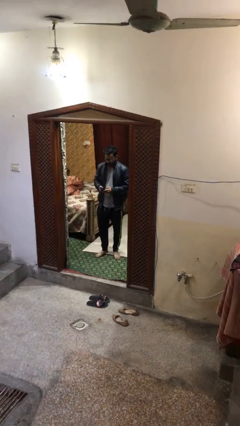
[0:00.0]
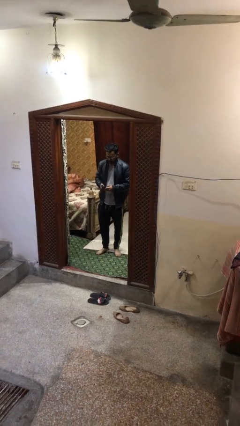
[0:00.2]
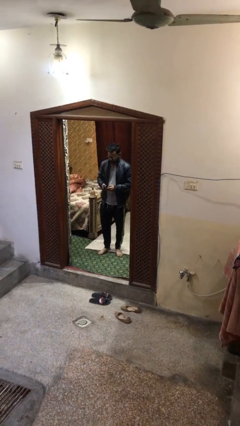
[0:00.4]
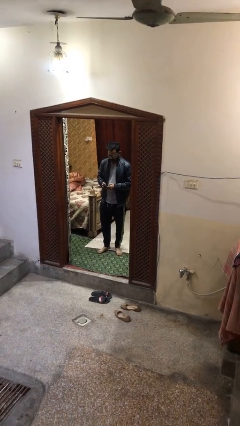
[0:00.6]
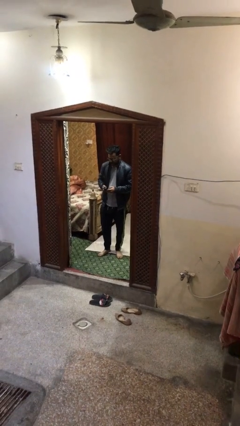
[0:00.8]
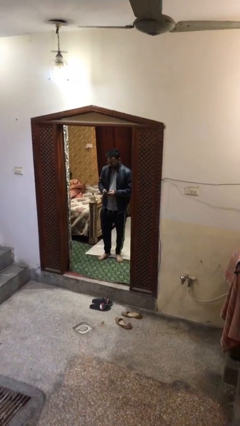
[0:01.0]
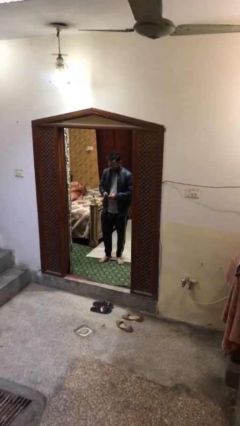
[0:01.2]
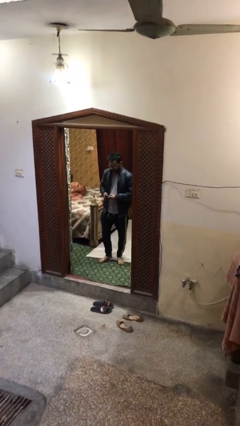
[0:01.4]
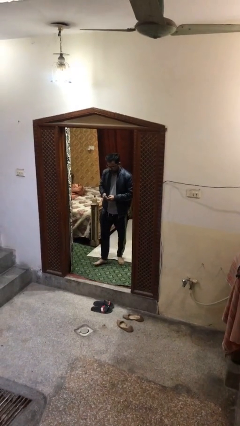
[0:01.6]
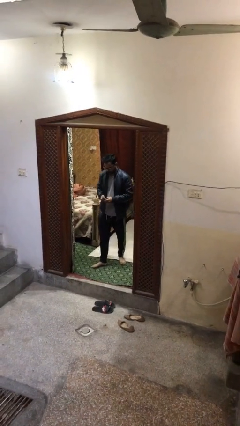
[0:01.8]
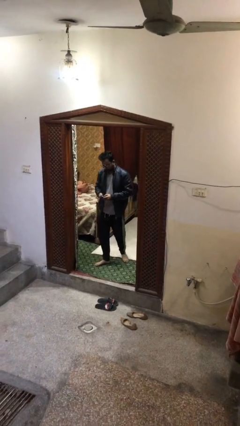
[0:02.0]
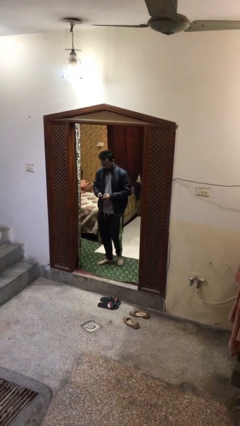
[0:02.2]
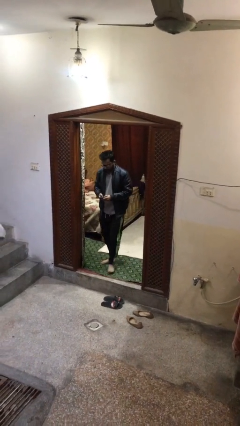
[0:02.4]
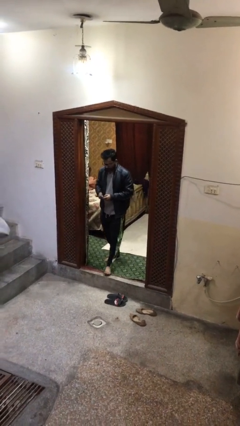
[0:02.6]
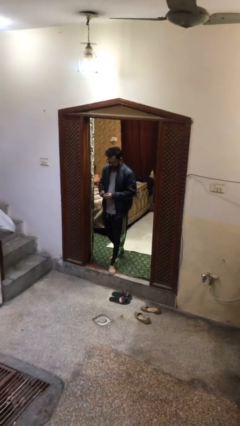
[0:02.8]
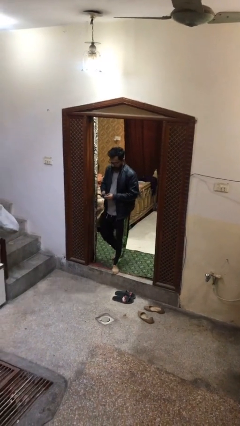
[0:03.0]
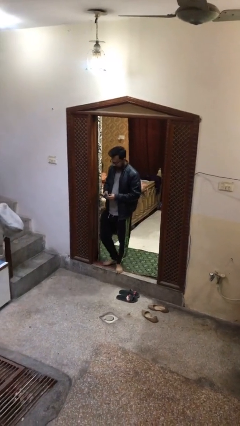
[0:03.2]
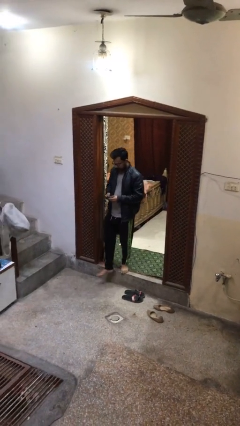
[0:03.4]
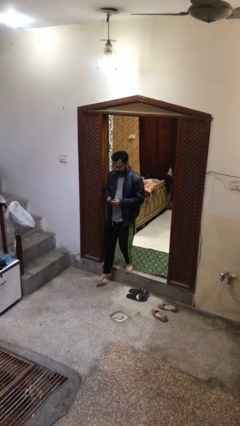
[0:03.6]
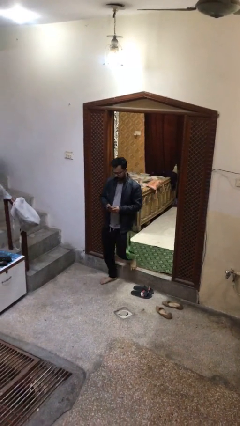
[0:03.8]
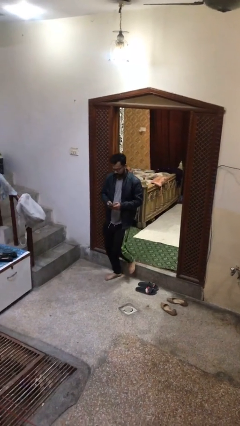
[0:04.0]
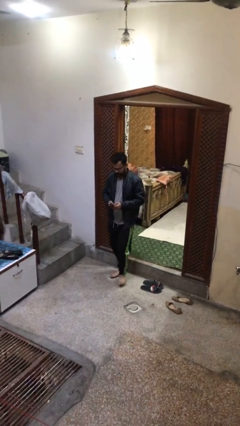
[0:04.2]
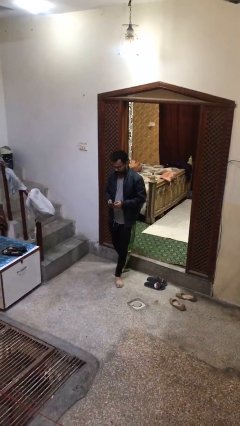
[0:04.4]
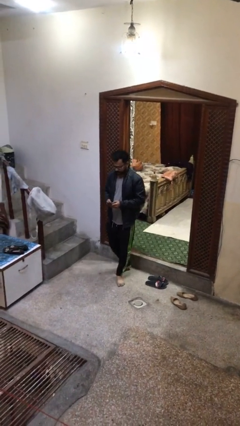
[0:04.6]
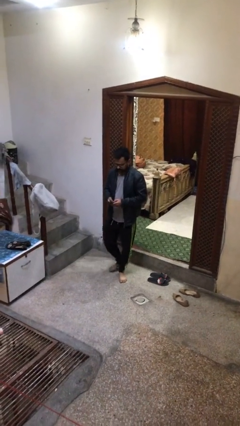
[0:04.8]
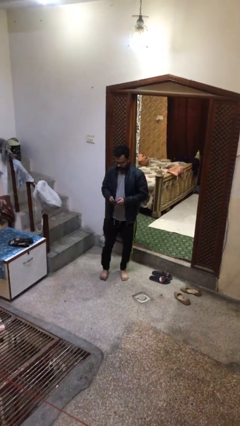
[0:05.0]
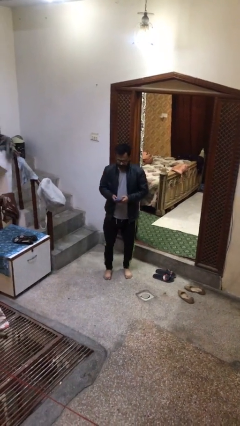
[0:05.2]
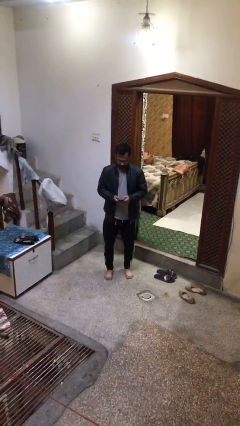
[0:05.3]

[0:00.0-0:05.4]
person enters scene through structure

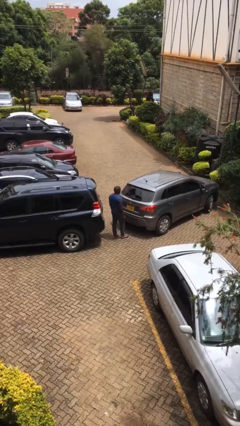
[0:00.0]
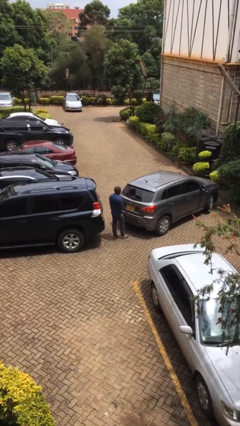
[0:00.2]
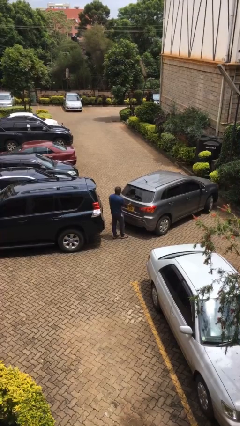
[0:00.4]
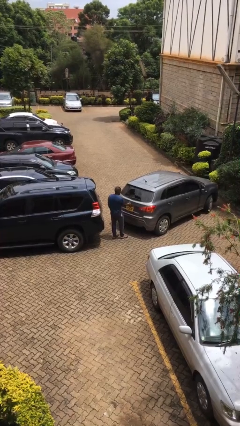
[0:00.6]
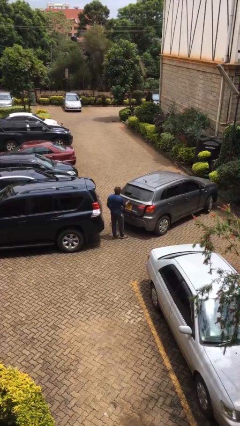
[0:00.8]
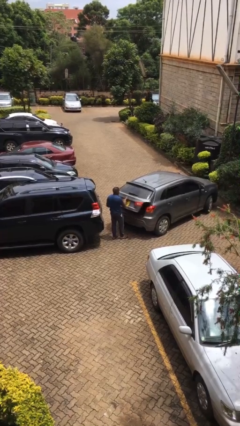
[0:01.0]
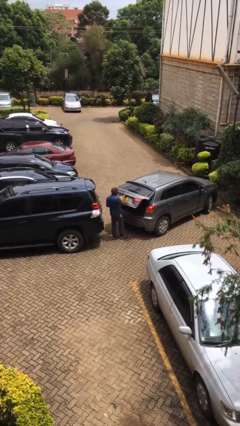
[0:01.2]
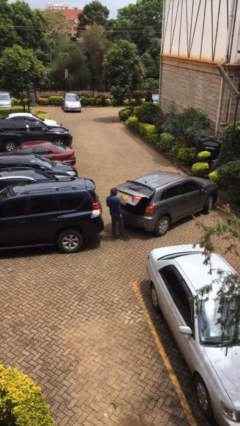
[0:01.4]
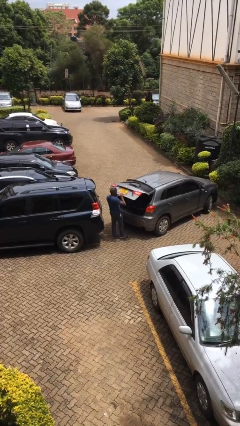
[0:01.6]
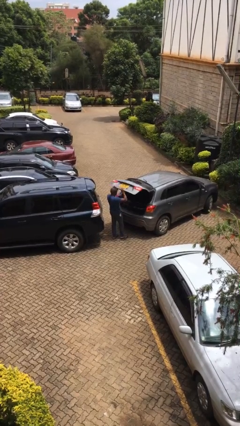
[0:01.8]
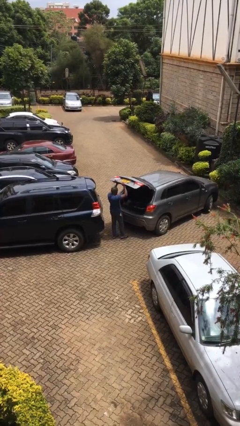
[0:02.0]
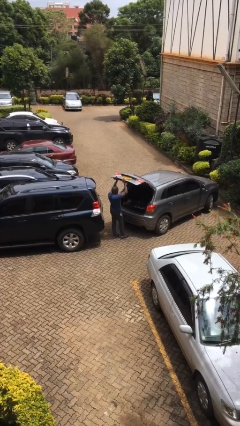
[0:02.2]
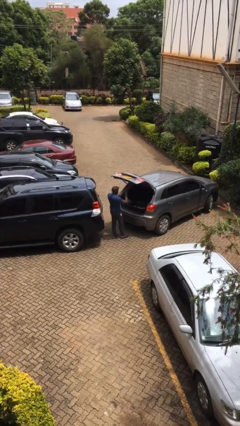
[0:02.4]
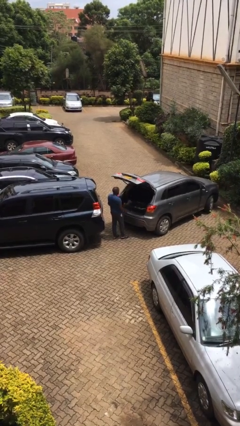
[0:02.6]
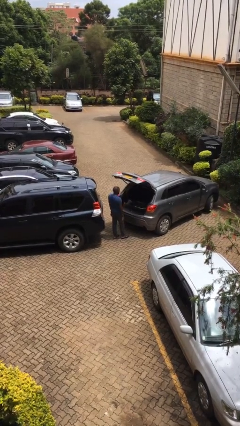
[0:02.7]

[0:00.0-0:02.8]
person opens car trunk

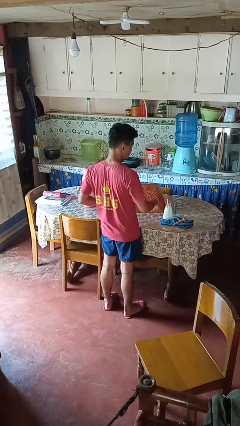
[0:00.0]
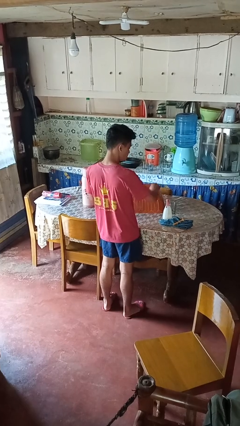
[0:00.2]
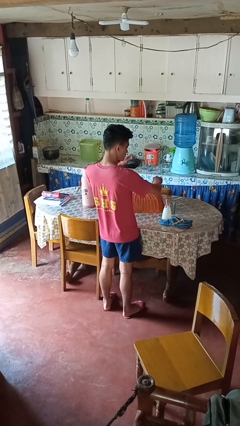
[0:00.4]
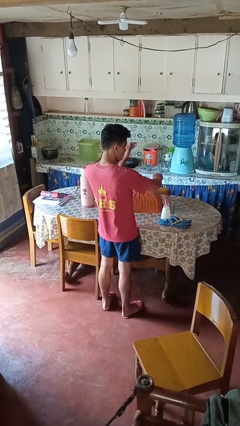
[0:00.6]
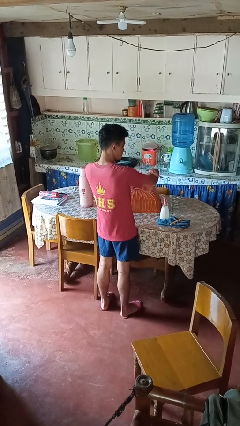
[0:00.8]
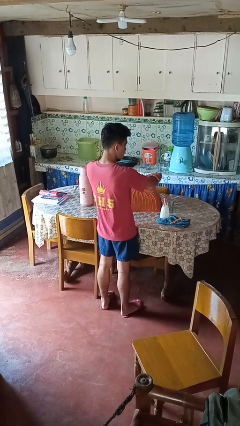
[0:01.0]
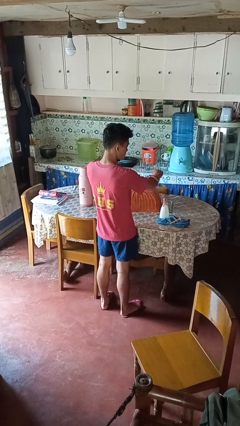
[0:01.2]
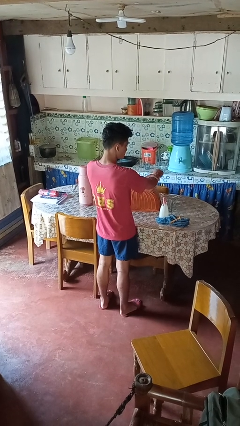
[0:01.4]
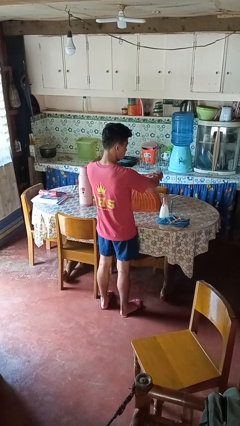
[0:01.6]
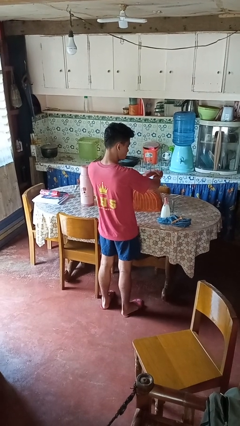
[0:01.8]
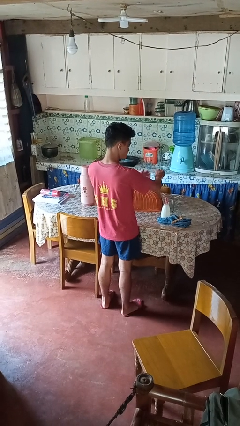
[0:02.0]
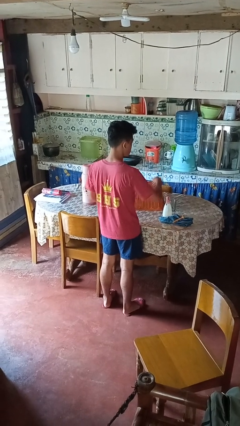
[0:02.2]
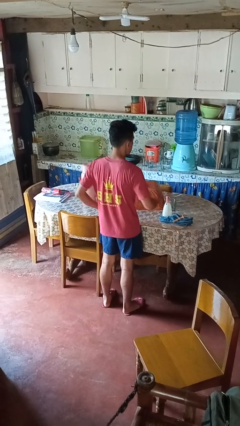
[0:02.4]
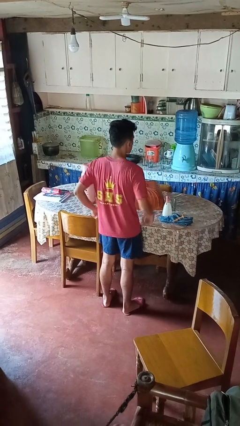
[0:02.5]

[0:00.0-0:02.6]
person swats bug

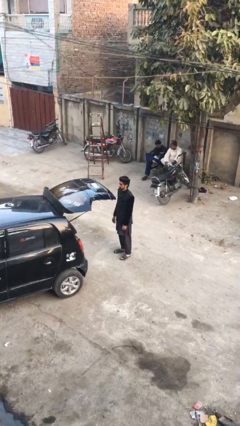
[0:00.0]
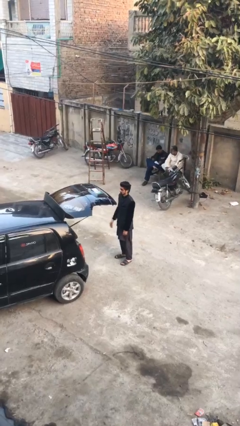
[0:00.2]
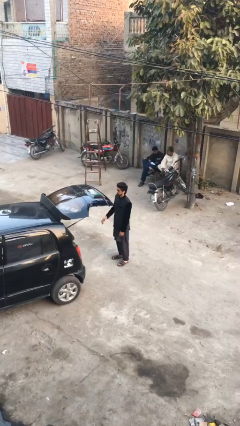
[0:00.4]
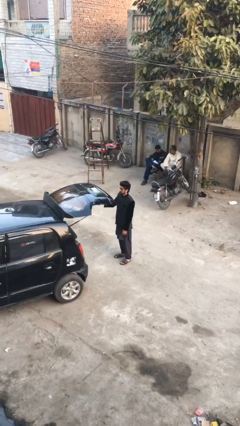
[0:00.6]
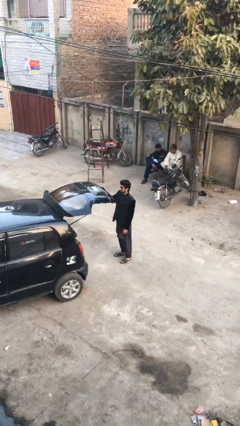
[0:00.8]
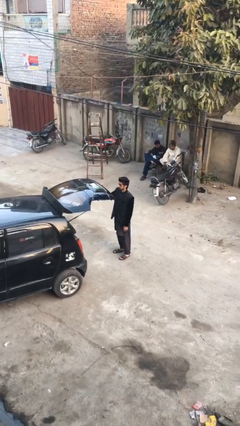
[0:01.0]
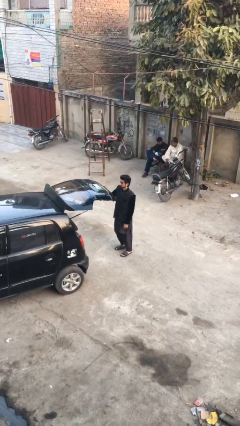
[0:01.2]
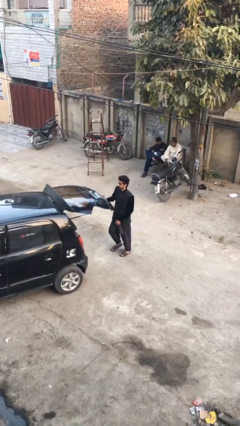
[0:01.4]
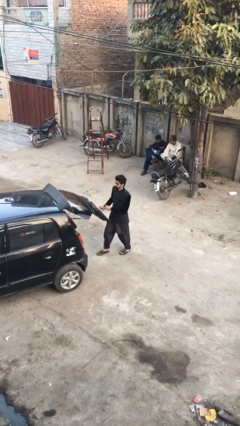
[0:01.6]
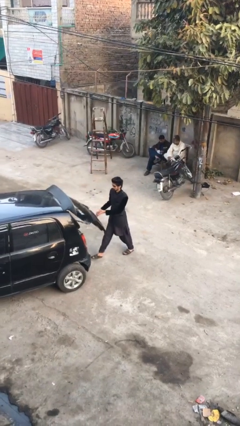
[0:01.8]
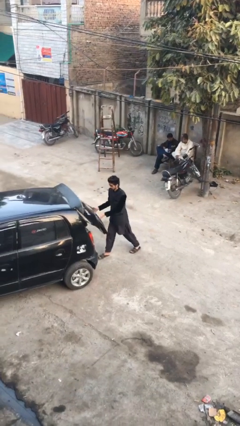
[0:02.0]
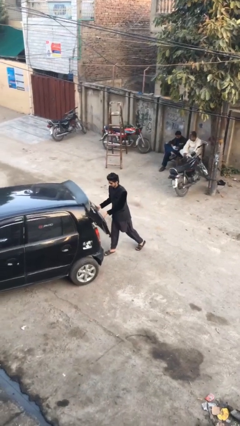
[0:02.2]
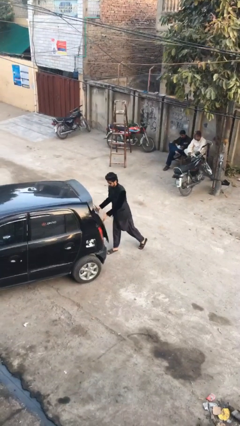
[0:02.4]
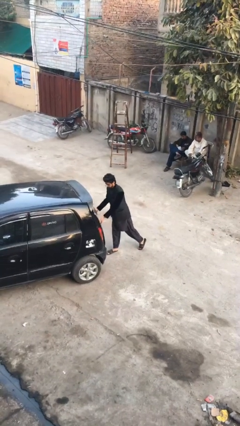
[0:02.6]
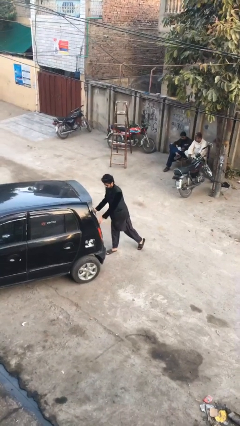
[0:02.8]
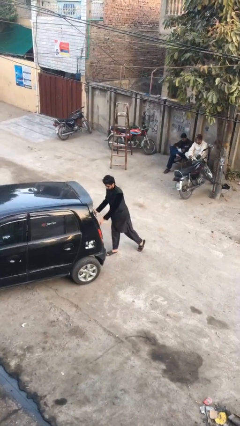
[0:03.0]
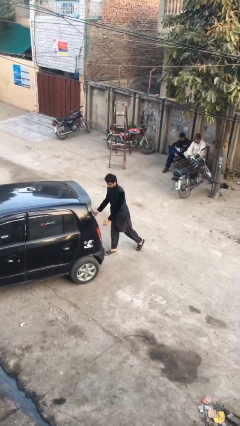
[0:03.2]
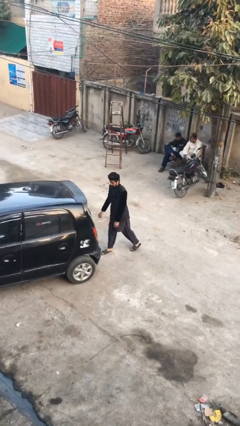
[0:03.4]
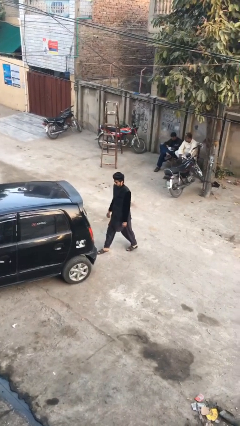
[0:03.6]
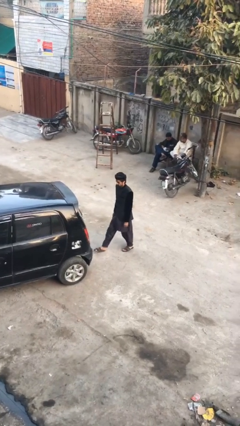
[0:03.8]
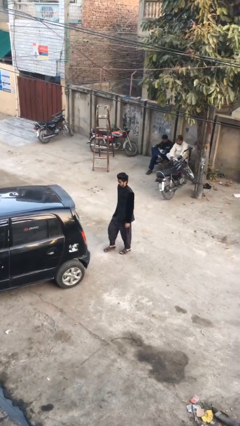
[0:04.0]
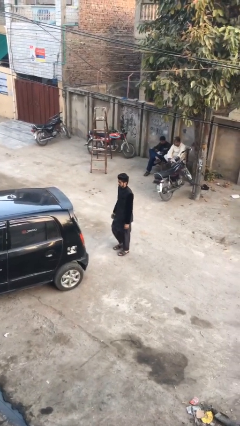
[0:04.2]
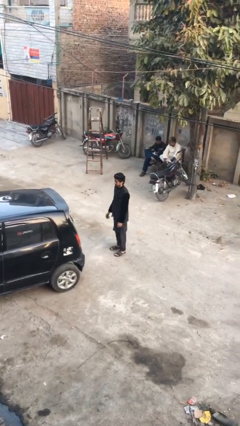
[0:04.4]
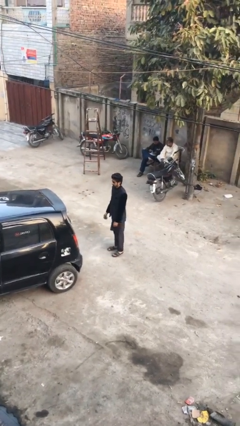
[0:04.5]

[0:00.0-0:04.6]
person closes car trunk

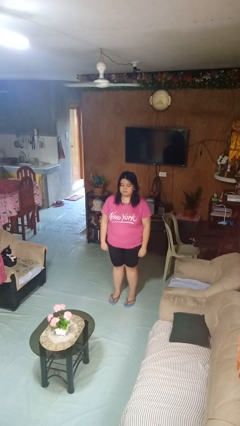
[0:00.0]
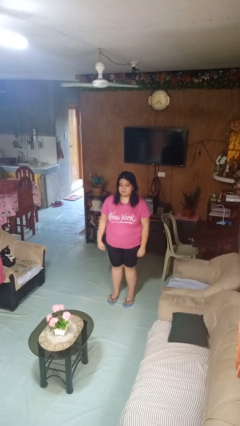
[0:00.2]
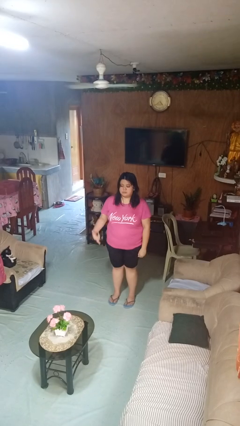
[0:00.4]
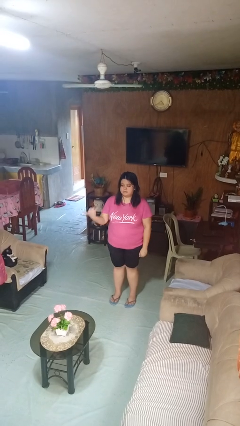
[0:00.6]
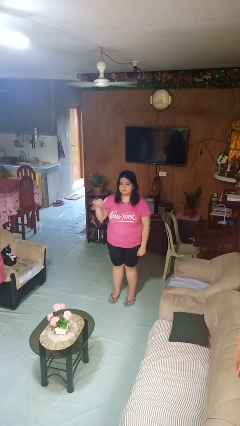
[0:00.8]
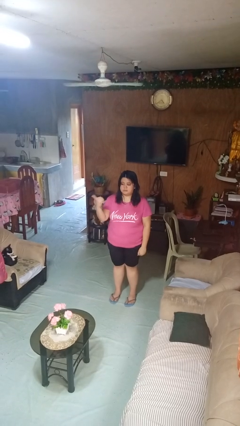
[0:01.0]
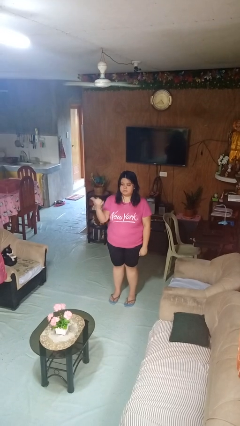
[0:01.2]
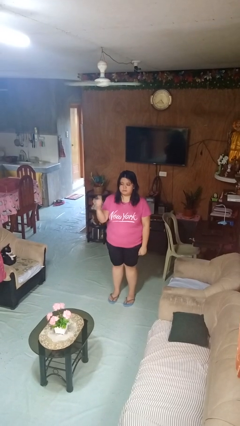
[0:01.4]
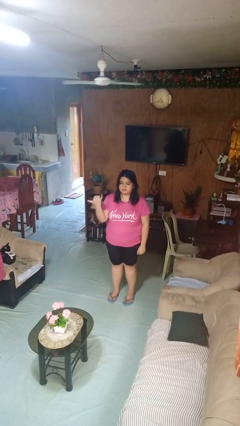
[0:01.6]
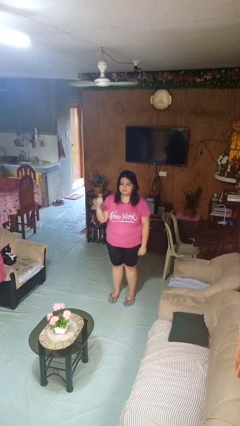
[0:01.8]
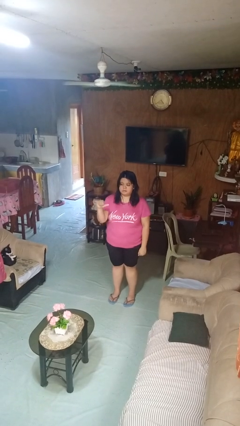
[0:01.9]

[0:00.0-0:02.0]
person gestures hang loose
